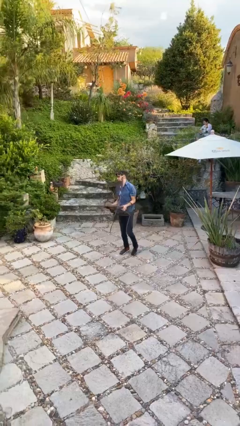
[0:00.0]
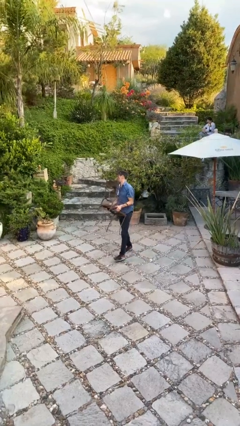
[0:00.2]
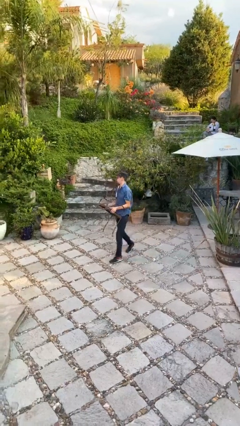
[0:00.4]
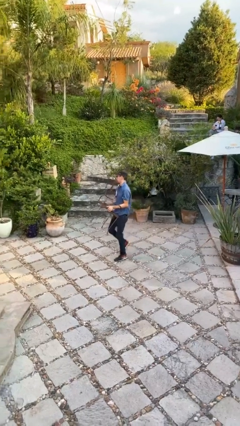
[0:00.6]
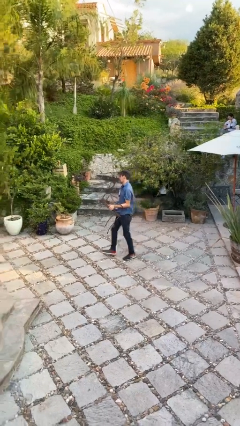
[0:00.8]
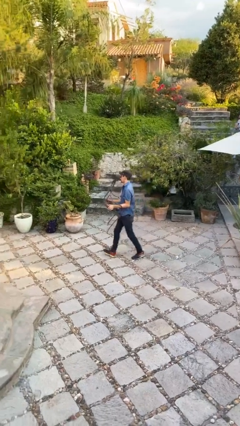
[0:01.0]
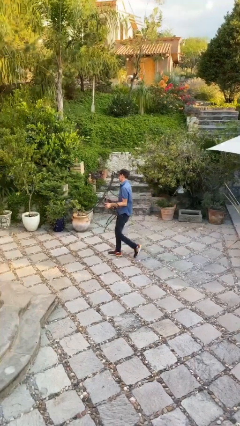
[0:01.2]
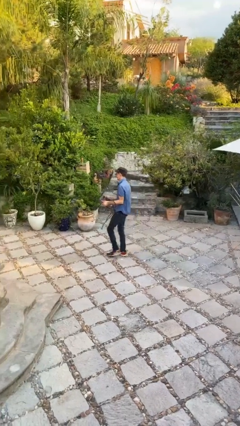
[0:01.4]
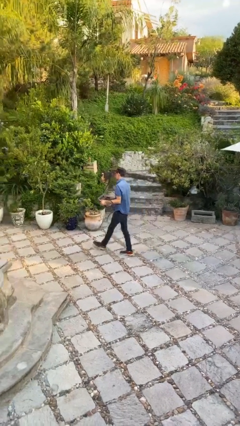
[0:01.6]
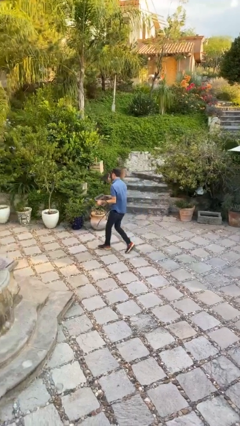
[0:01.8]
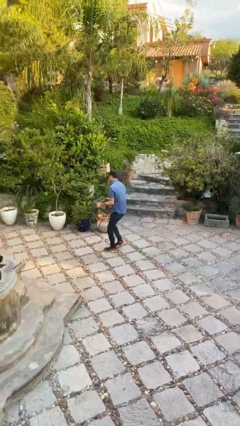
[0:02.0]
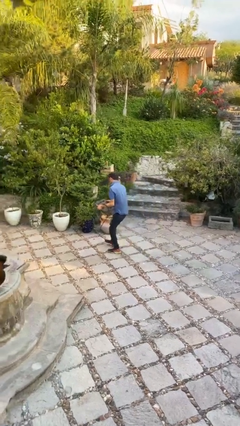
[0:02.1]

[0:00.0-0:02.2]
person carries heavy object

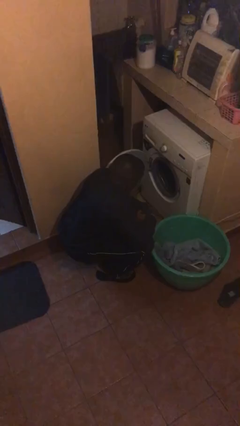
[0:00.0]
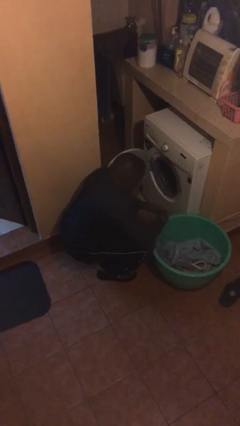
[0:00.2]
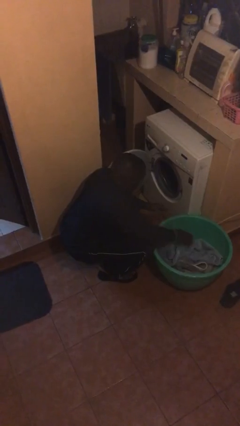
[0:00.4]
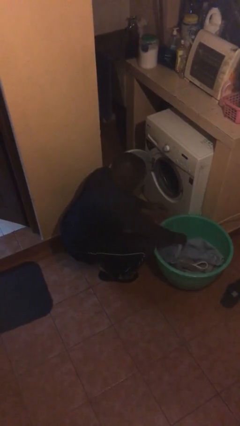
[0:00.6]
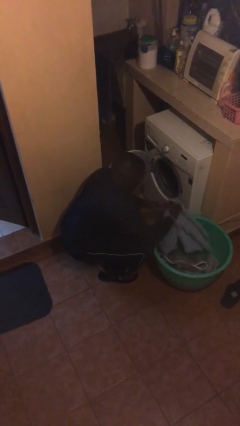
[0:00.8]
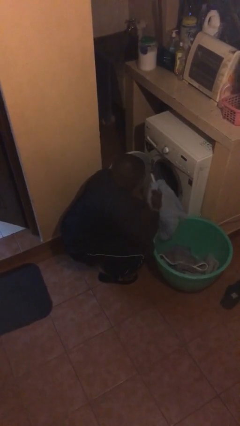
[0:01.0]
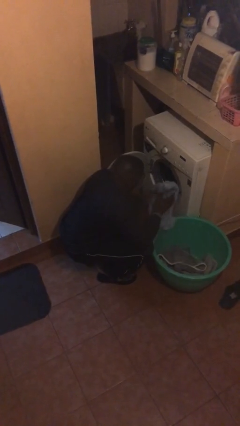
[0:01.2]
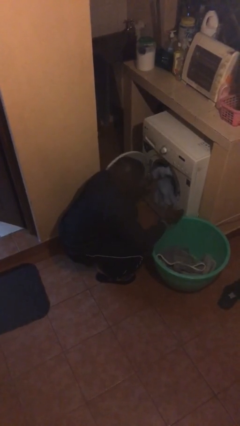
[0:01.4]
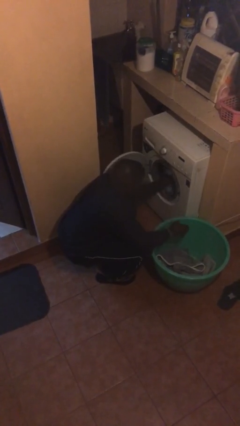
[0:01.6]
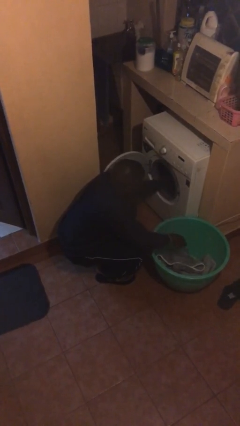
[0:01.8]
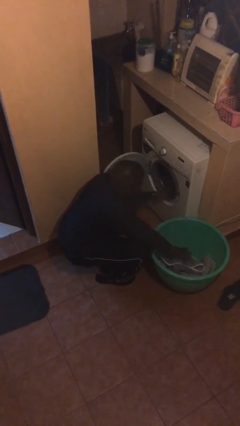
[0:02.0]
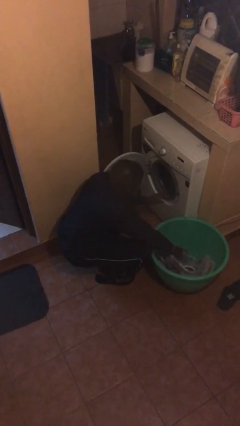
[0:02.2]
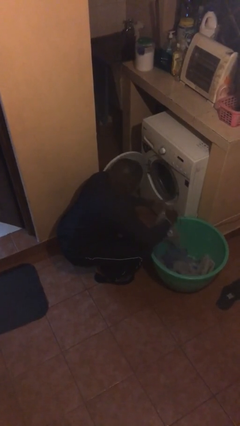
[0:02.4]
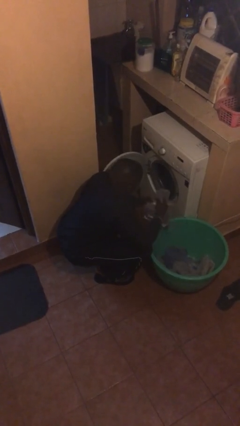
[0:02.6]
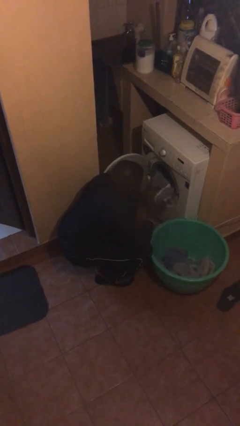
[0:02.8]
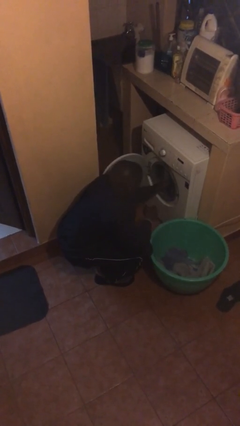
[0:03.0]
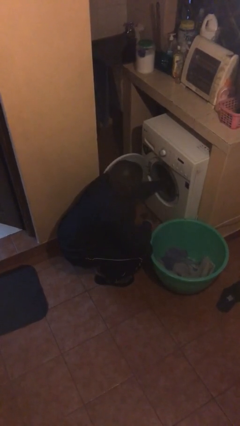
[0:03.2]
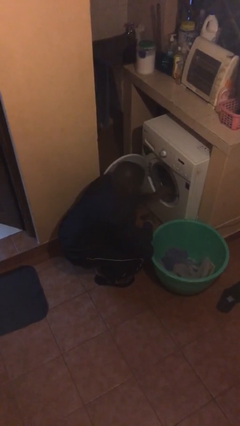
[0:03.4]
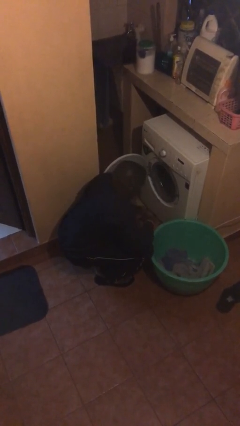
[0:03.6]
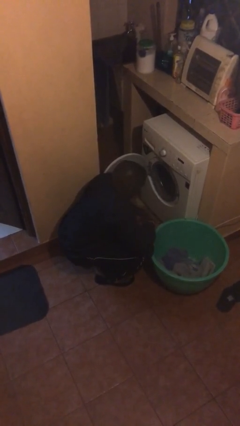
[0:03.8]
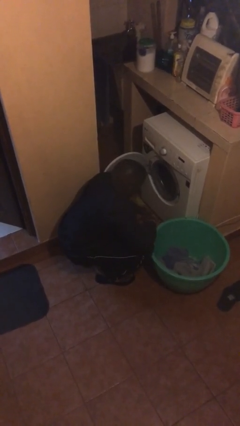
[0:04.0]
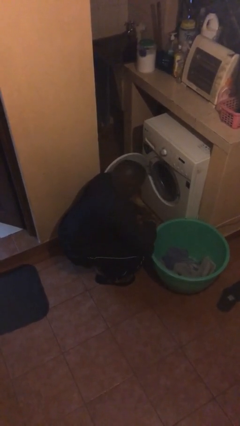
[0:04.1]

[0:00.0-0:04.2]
person loads clotheswasher

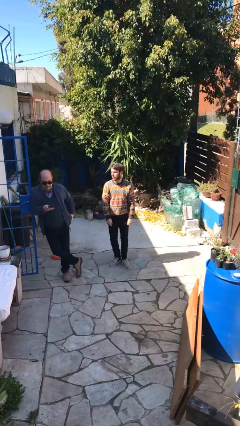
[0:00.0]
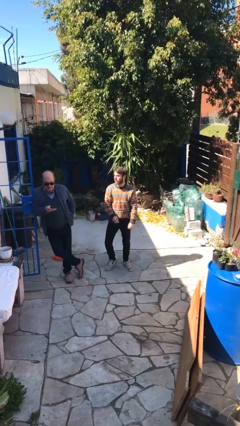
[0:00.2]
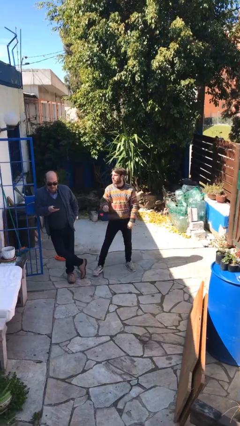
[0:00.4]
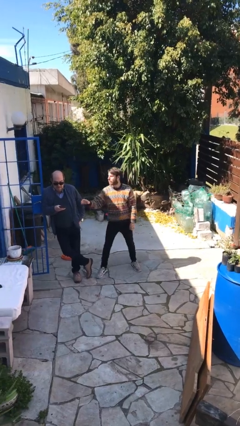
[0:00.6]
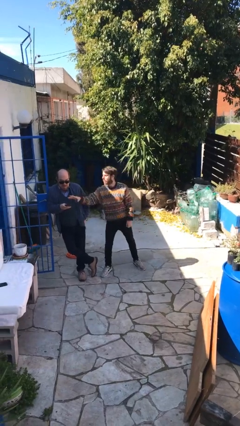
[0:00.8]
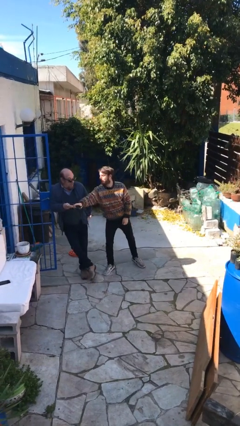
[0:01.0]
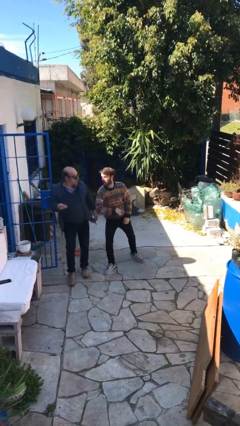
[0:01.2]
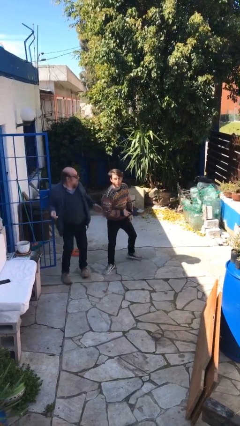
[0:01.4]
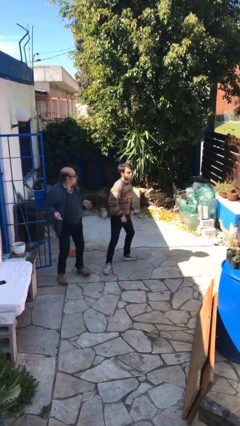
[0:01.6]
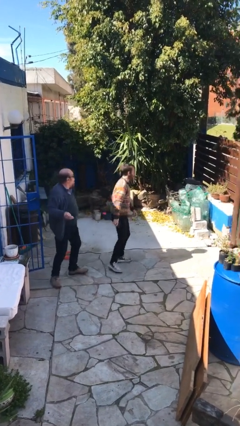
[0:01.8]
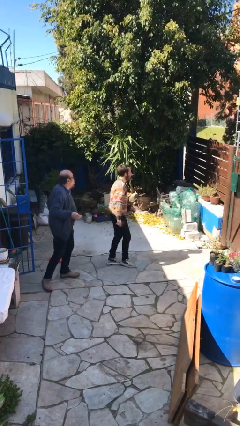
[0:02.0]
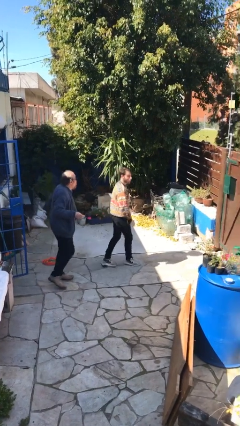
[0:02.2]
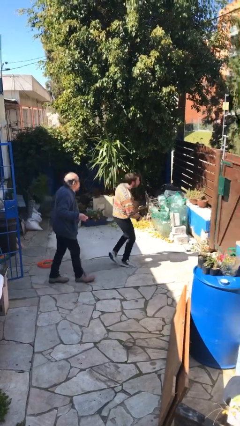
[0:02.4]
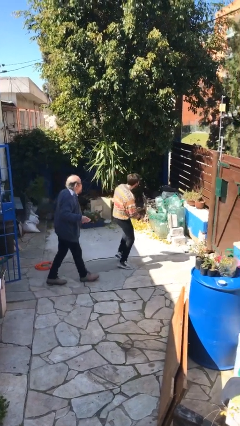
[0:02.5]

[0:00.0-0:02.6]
person steals object from person

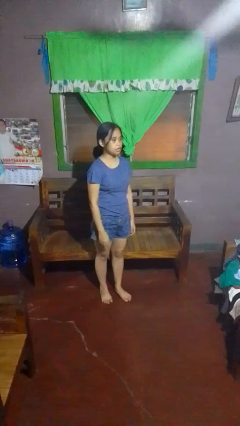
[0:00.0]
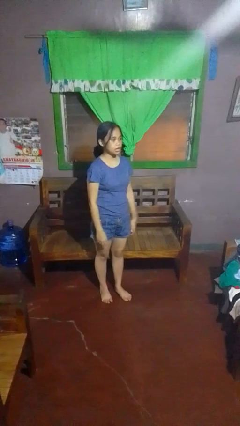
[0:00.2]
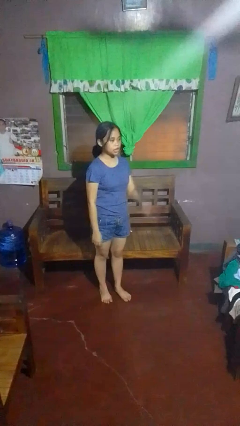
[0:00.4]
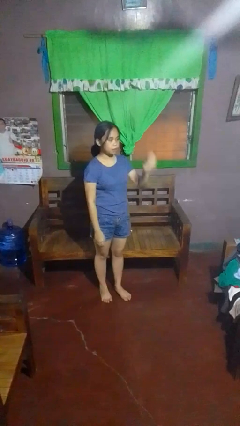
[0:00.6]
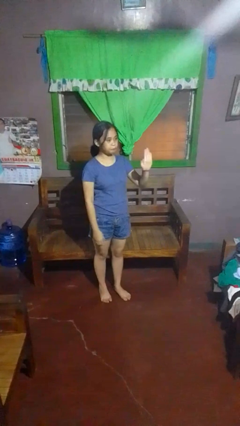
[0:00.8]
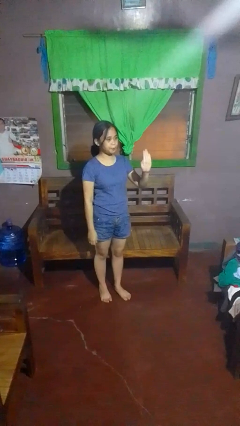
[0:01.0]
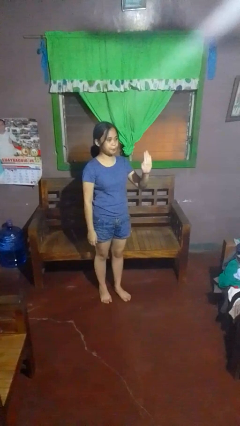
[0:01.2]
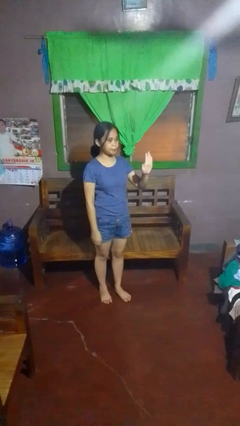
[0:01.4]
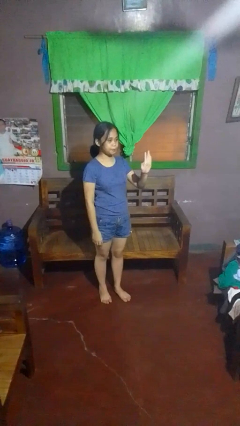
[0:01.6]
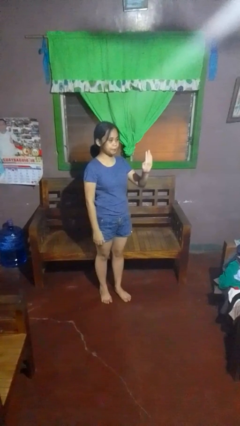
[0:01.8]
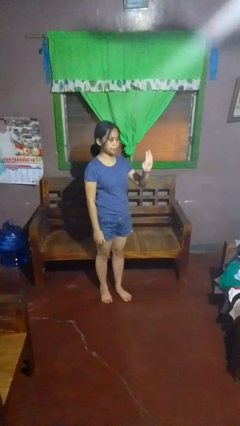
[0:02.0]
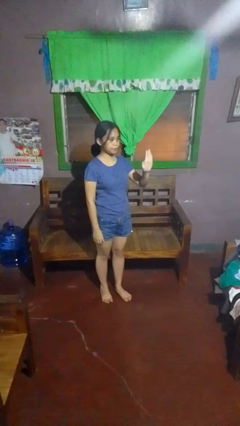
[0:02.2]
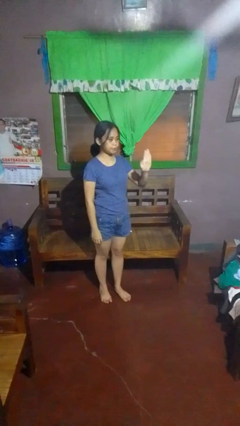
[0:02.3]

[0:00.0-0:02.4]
person gestures stop

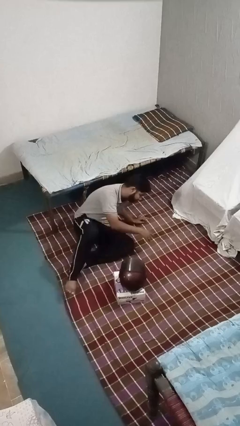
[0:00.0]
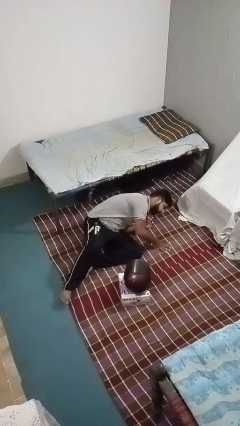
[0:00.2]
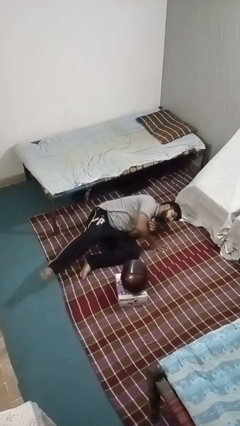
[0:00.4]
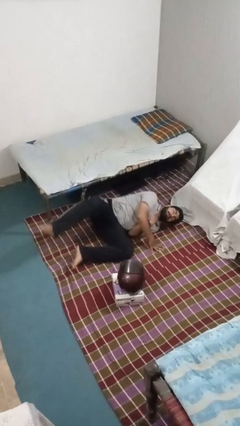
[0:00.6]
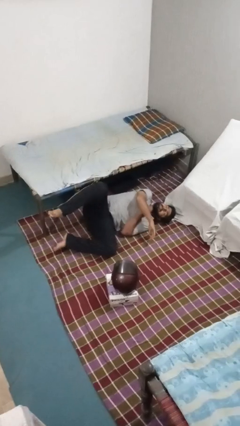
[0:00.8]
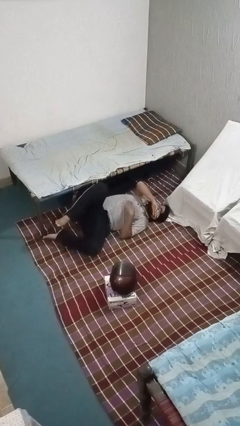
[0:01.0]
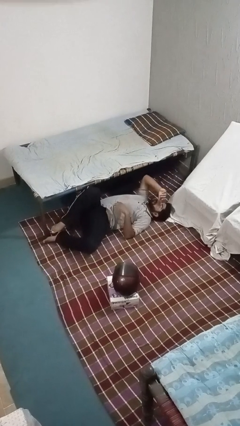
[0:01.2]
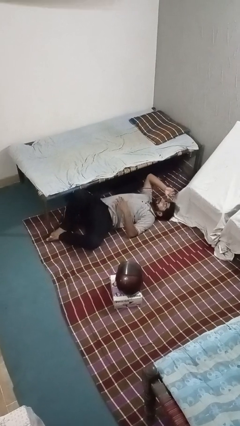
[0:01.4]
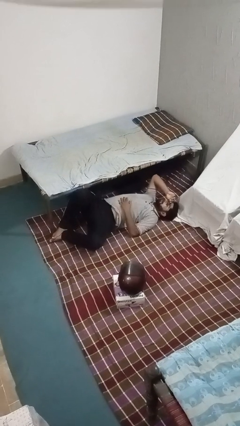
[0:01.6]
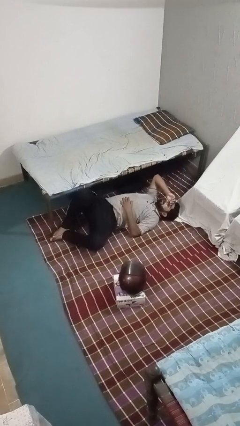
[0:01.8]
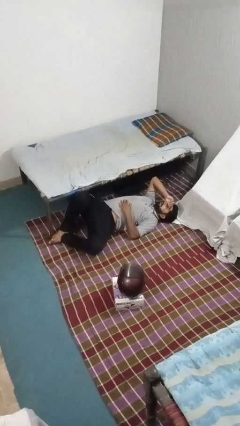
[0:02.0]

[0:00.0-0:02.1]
person lies down on floor

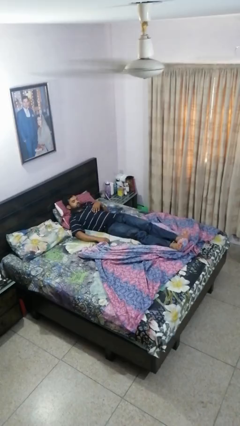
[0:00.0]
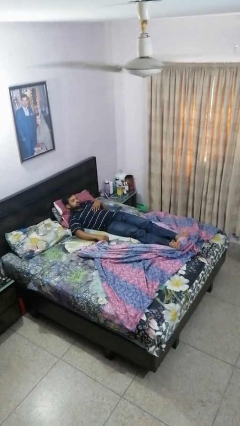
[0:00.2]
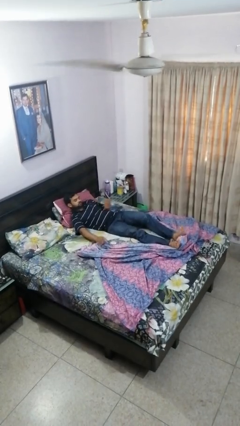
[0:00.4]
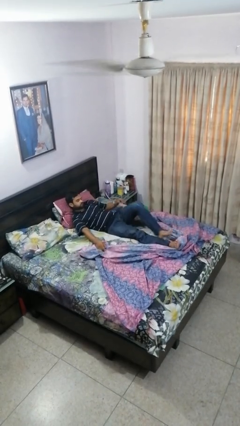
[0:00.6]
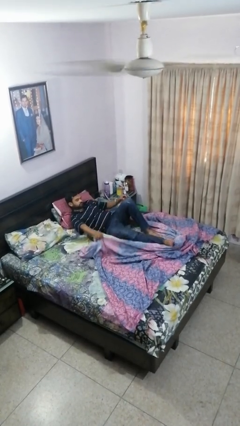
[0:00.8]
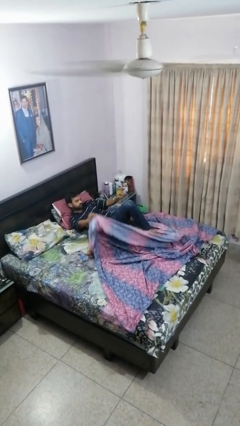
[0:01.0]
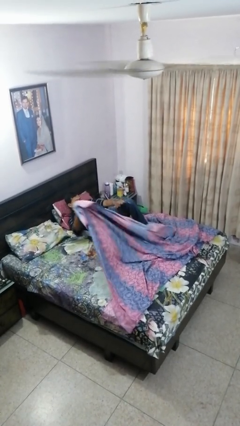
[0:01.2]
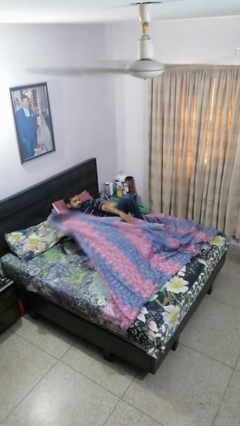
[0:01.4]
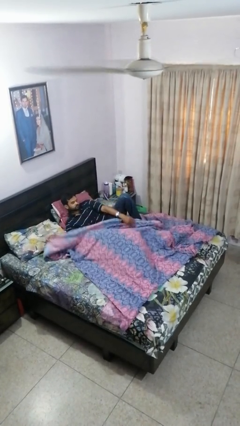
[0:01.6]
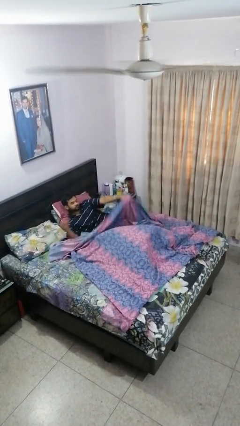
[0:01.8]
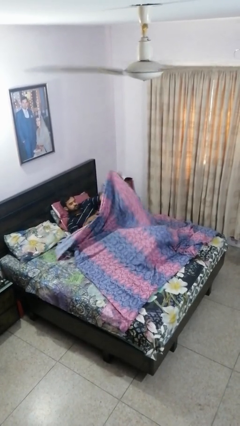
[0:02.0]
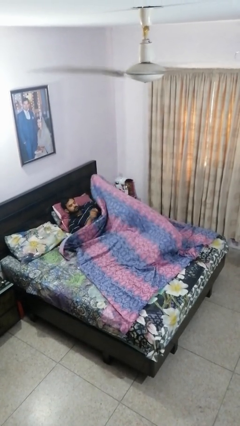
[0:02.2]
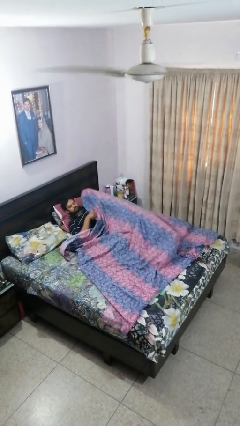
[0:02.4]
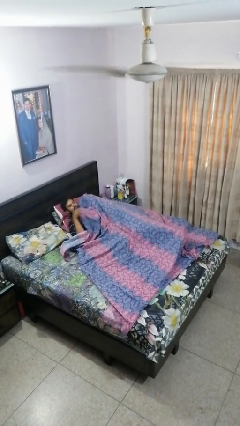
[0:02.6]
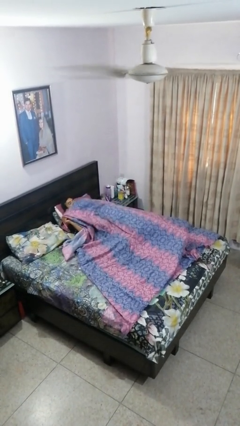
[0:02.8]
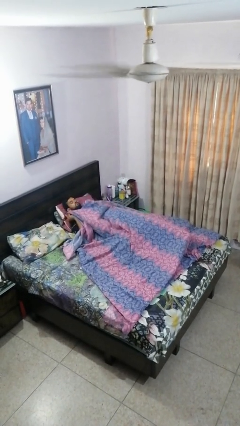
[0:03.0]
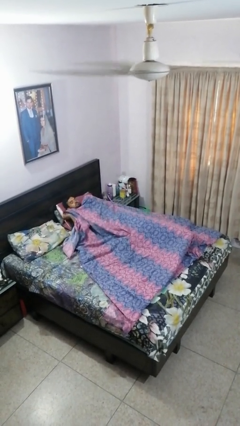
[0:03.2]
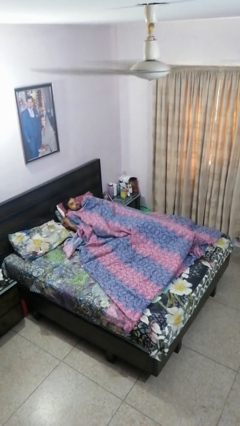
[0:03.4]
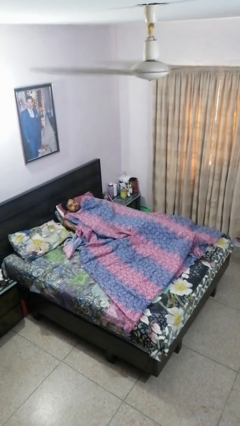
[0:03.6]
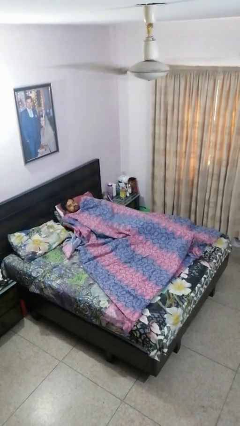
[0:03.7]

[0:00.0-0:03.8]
person covers with bedsheets
